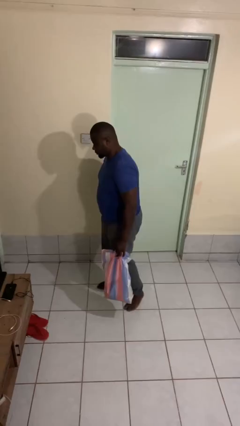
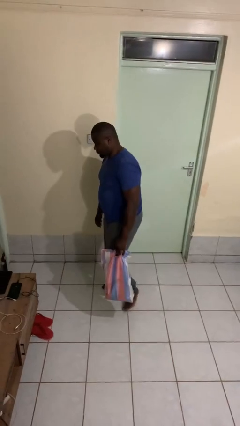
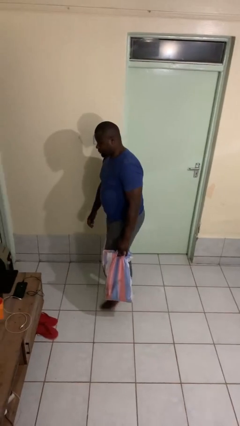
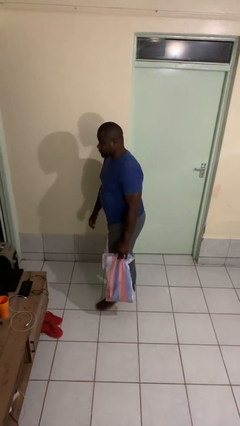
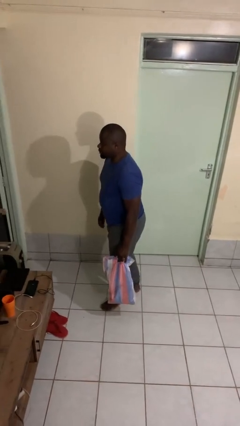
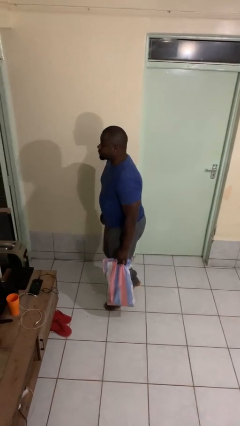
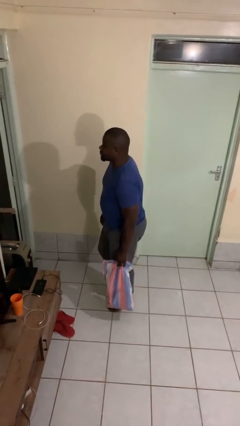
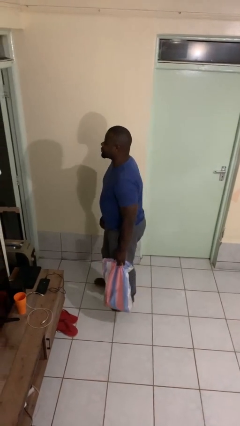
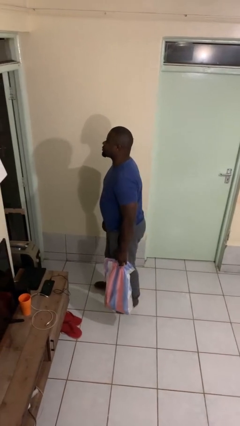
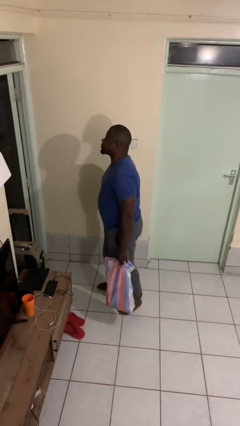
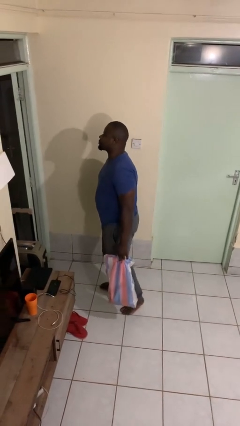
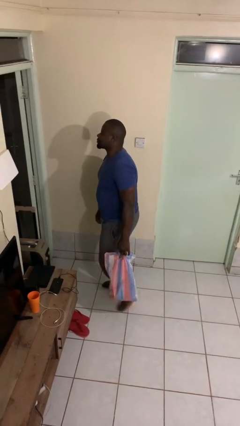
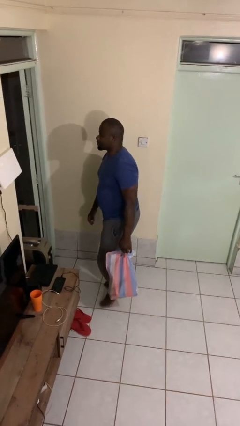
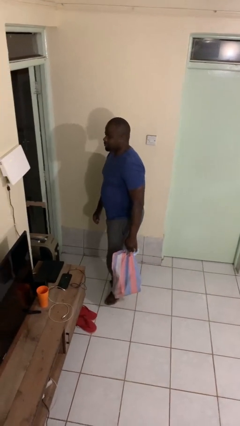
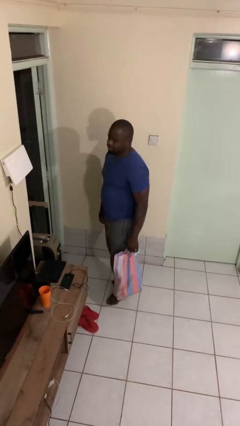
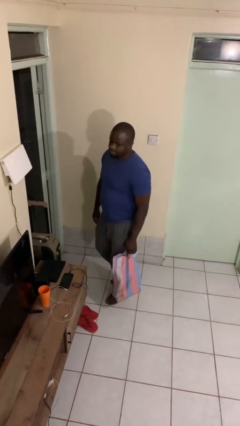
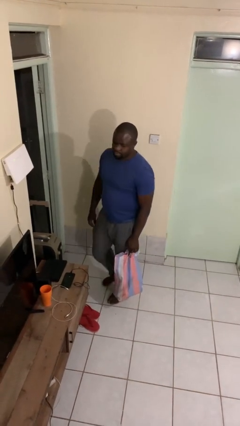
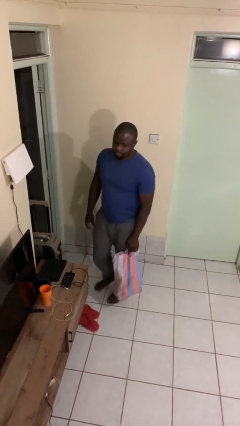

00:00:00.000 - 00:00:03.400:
person carries groceries

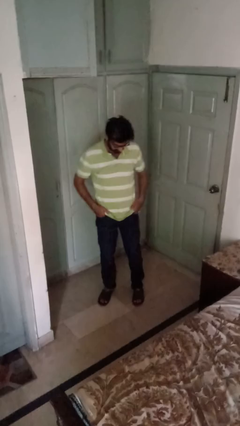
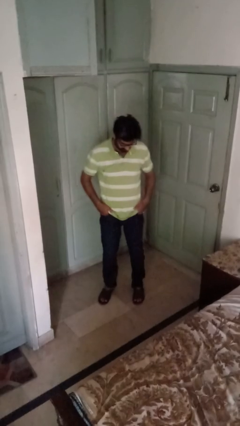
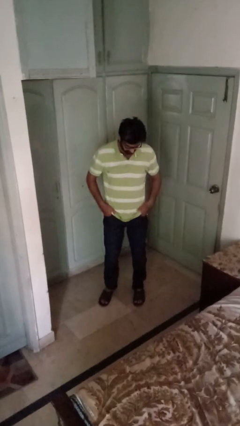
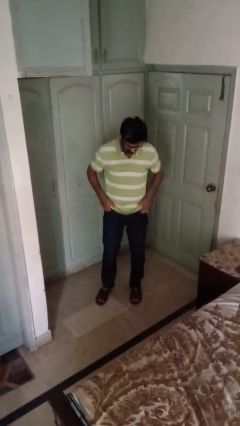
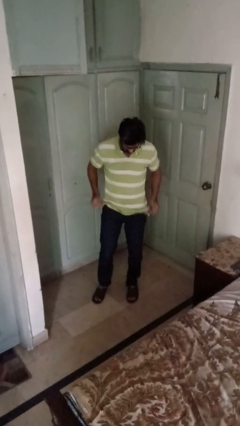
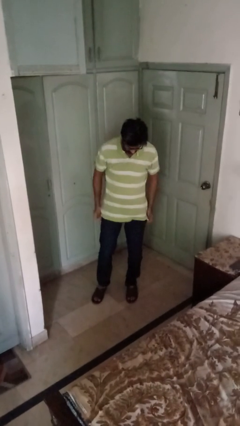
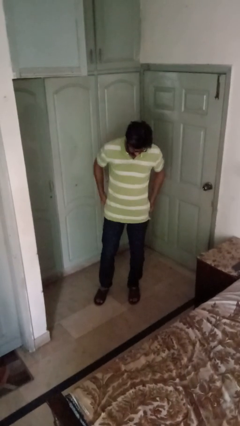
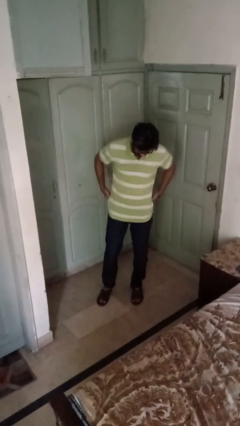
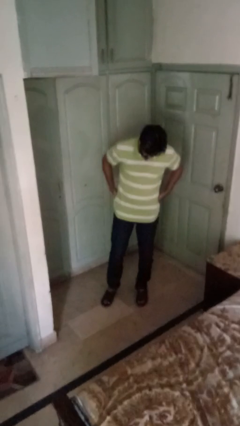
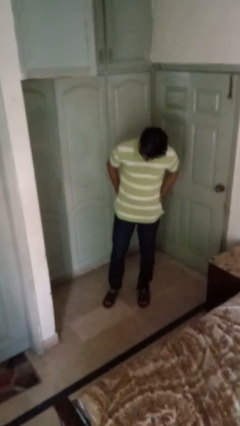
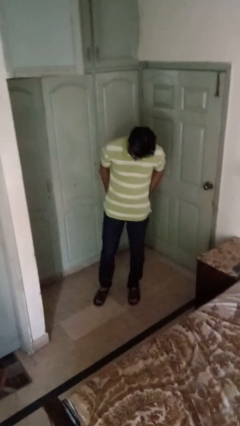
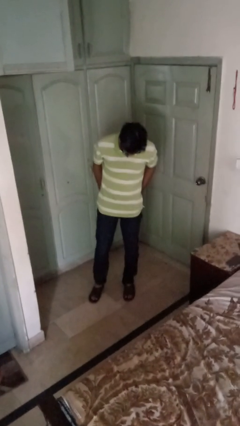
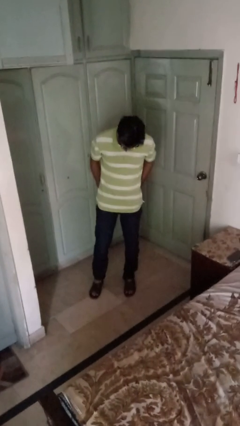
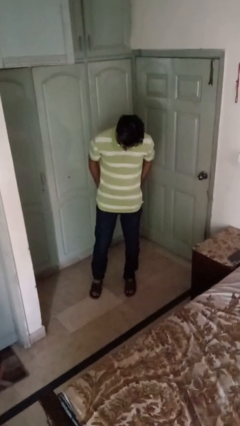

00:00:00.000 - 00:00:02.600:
person puts hands in back pockets

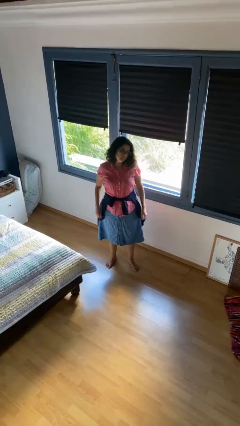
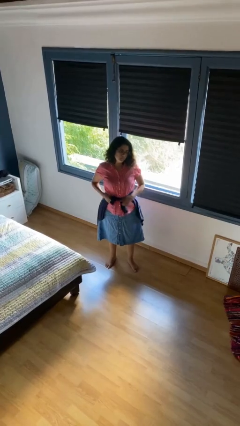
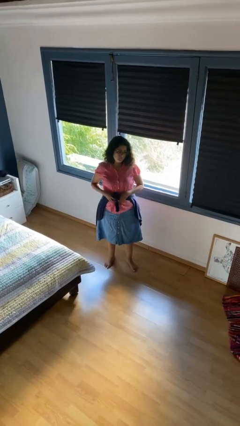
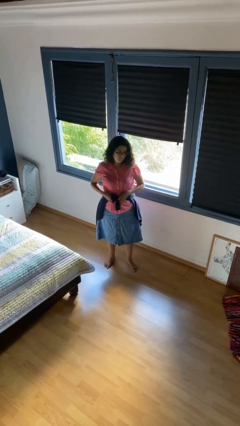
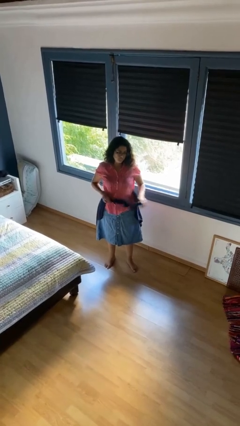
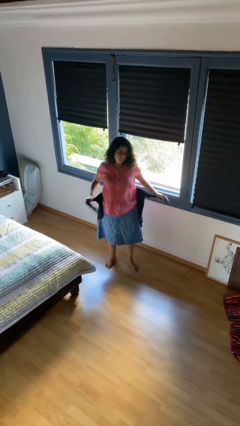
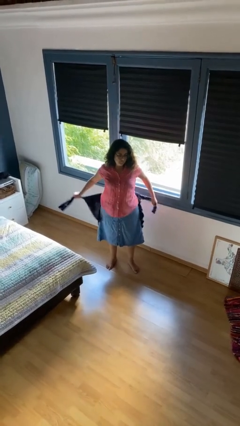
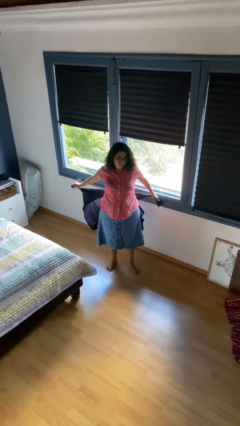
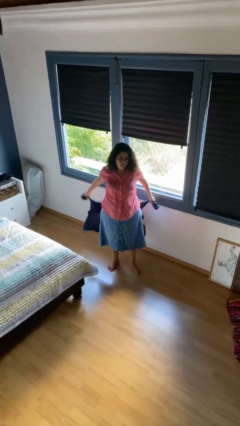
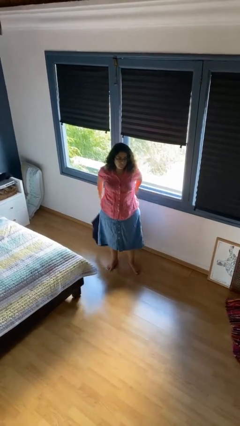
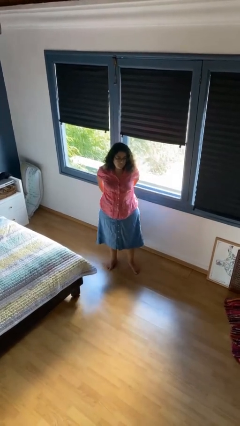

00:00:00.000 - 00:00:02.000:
person unties jacket around waist

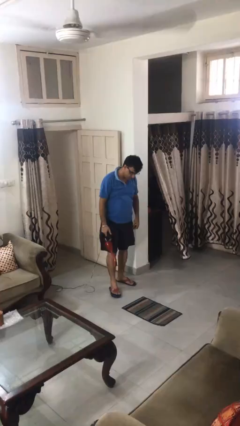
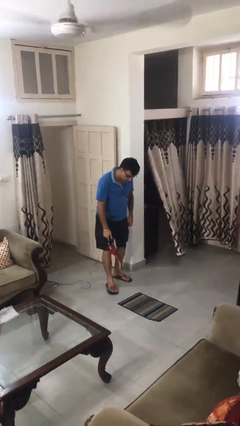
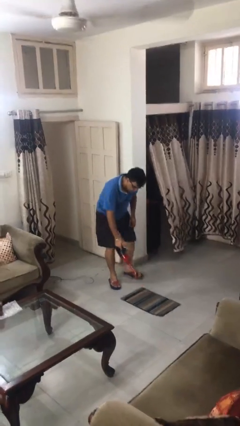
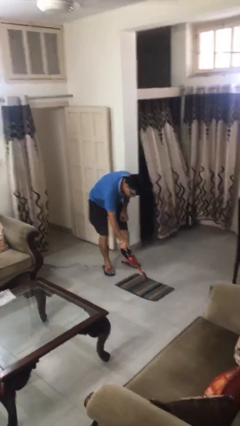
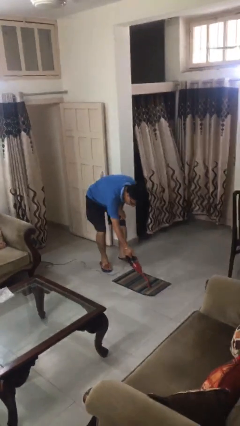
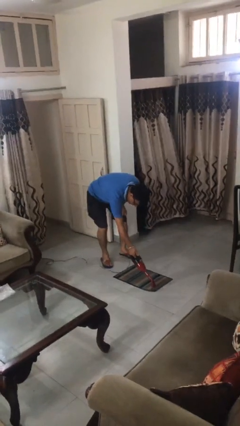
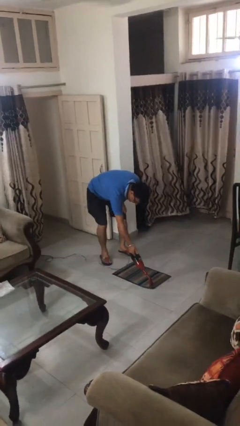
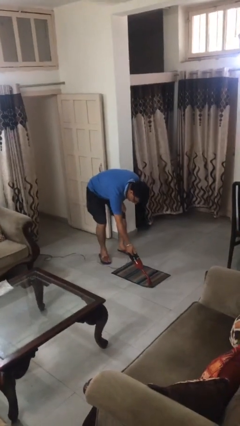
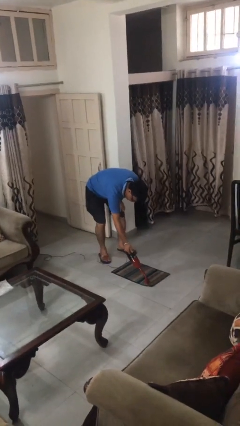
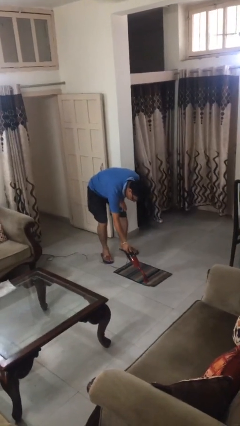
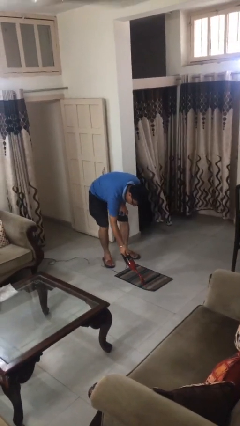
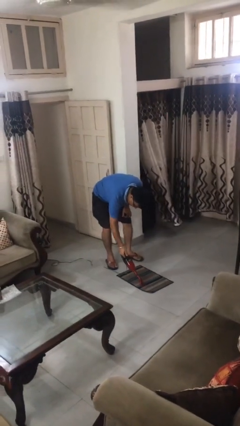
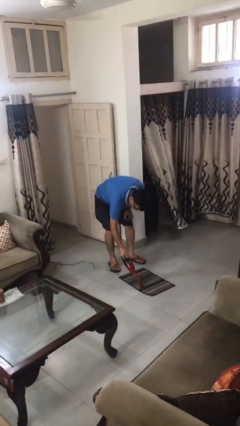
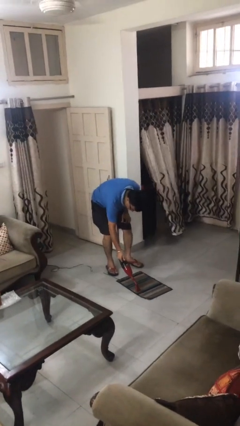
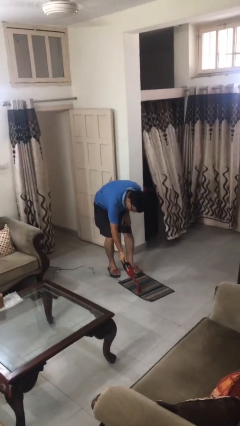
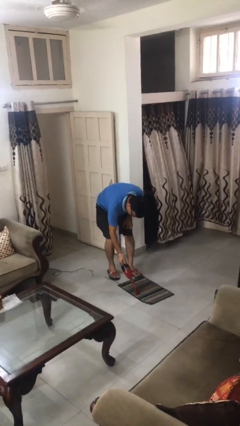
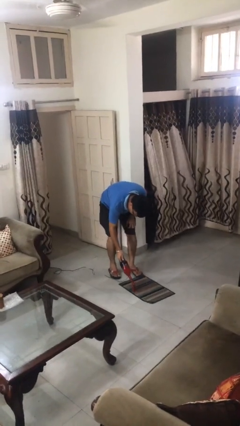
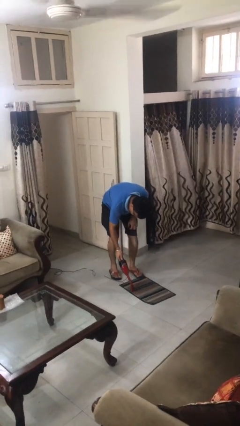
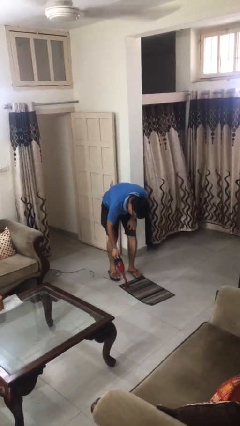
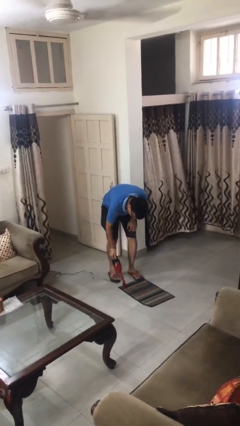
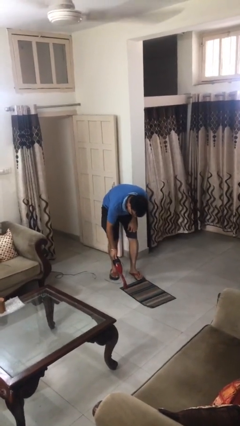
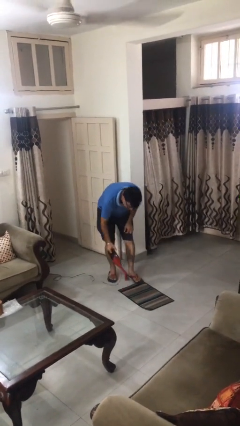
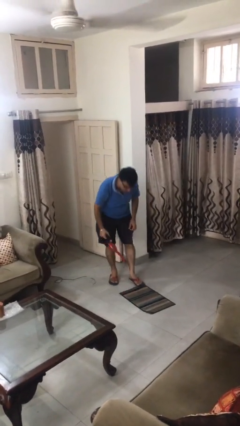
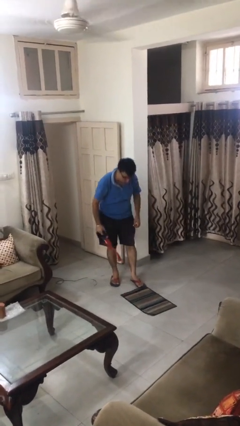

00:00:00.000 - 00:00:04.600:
person vacuums carpet

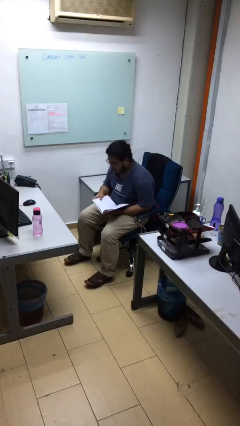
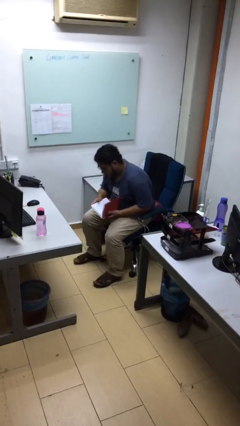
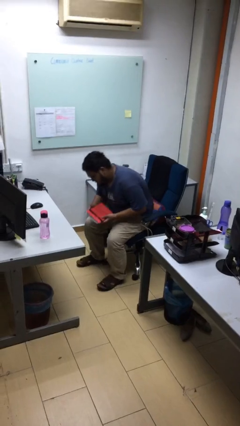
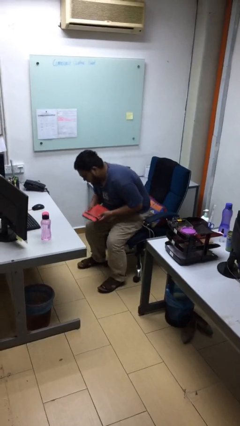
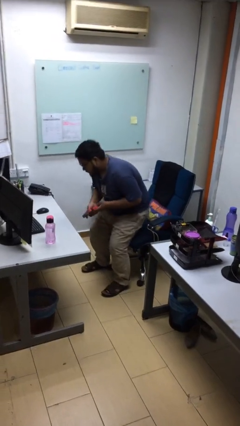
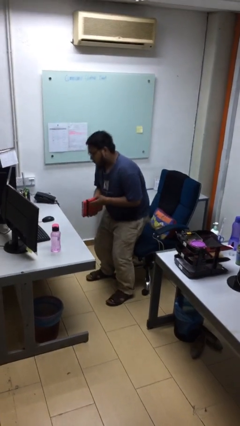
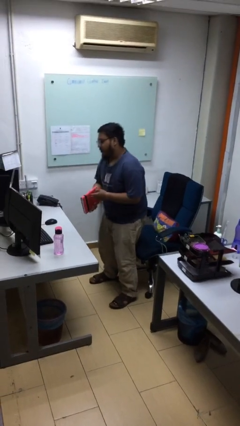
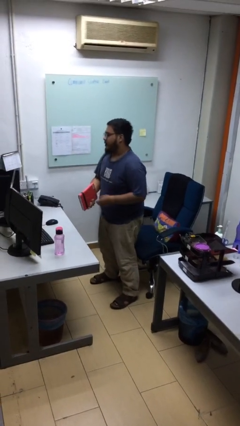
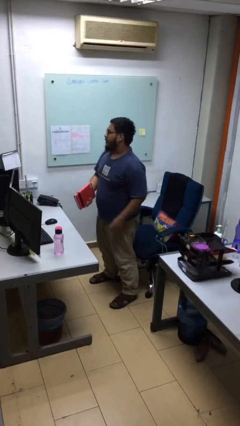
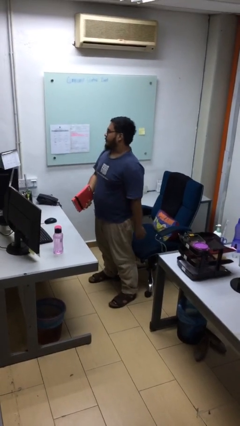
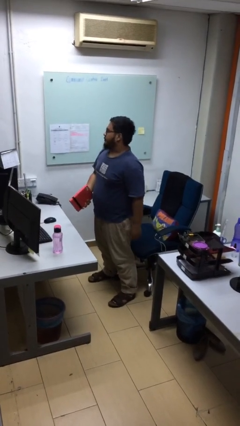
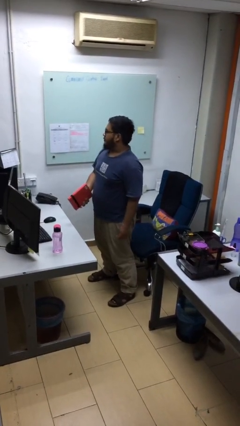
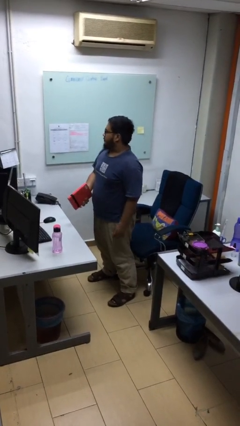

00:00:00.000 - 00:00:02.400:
person stands up

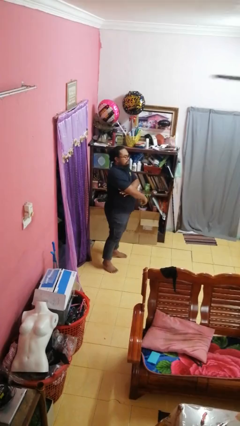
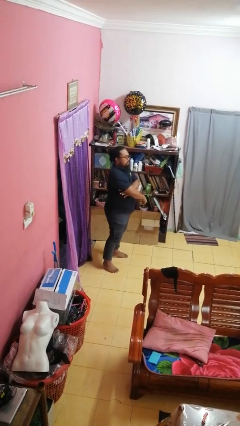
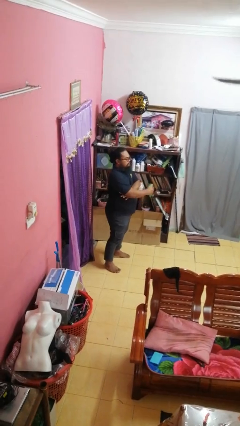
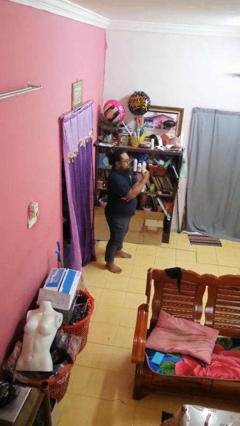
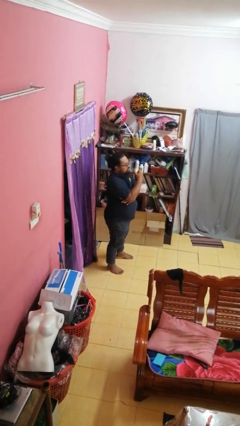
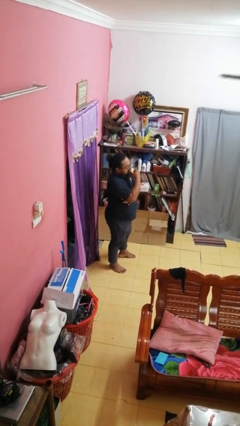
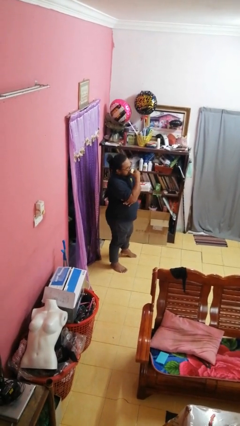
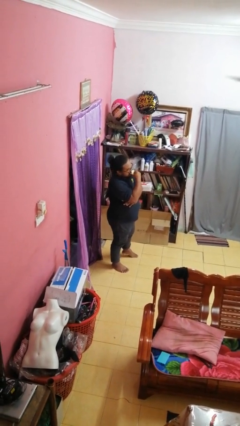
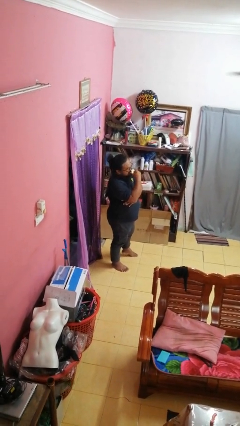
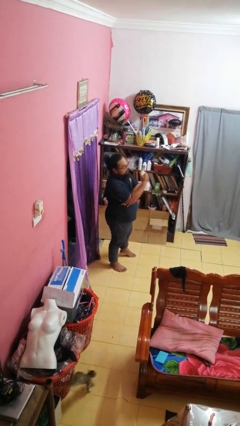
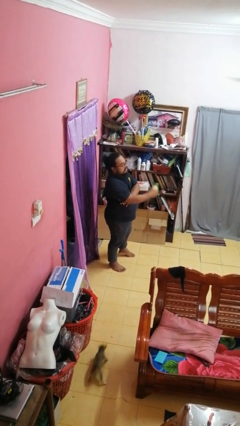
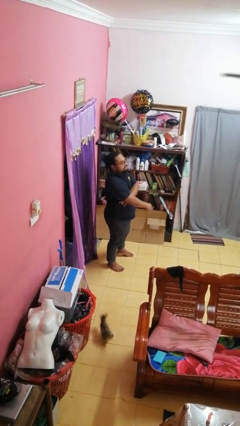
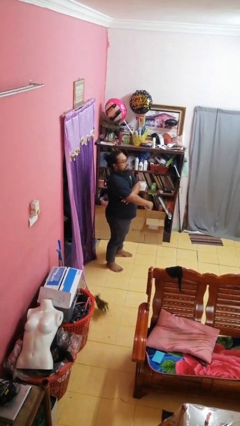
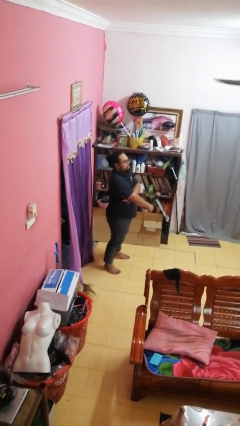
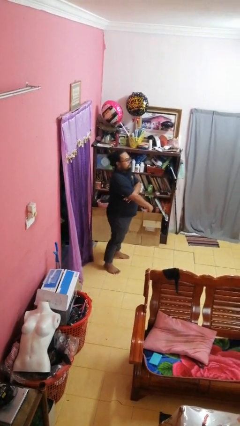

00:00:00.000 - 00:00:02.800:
person eats apple
